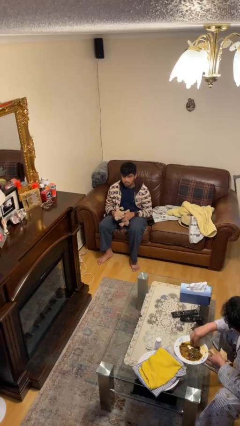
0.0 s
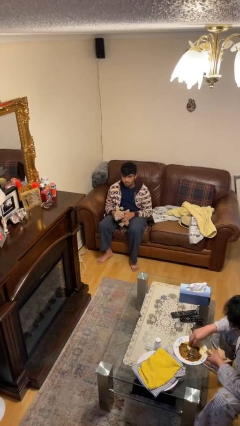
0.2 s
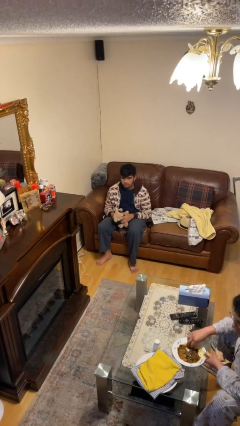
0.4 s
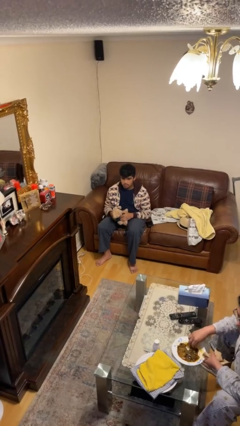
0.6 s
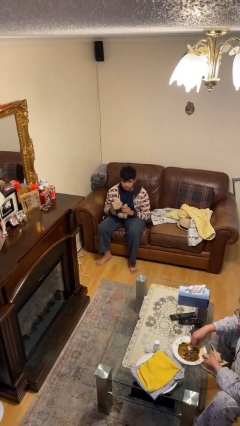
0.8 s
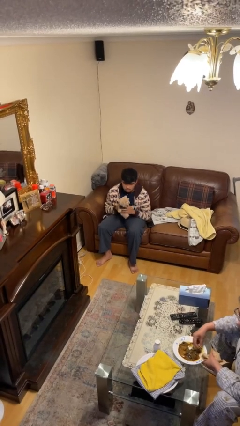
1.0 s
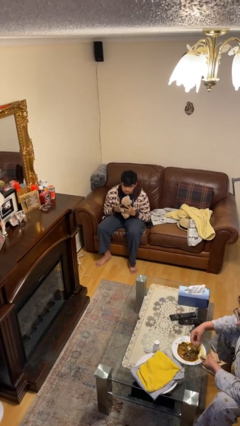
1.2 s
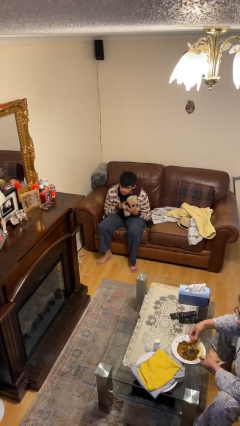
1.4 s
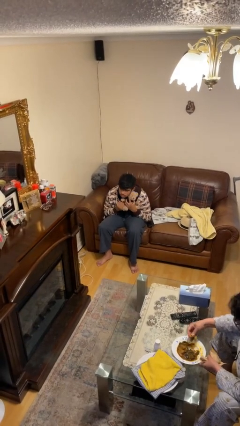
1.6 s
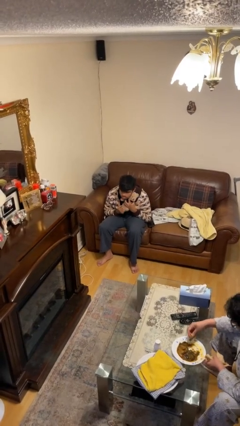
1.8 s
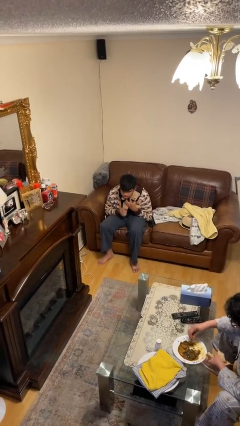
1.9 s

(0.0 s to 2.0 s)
person hugs stuffed animal

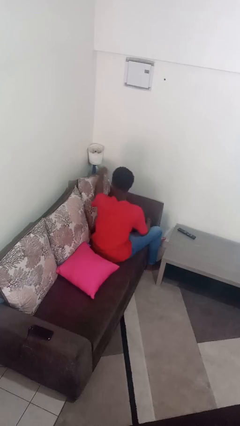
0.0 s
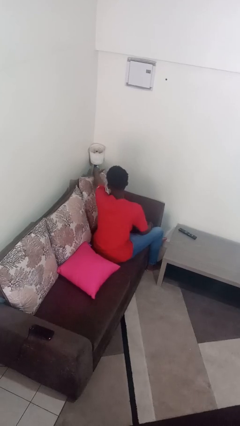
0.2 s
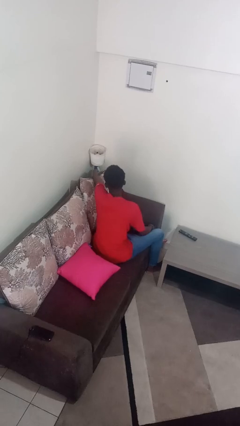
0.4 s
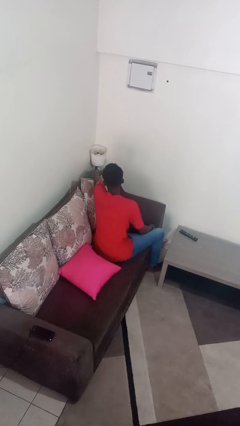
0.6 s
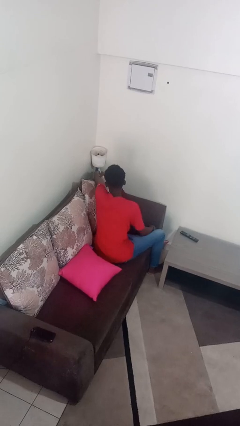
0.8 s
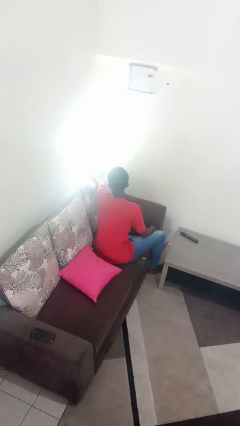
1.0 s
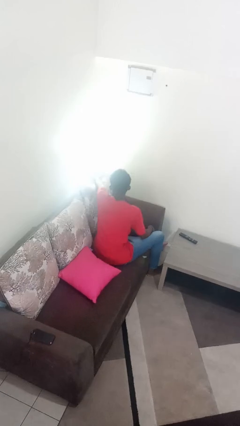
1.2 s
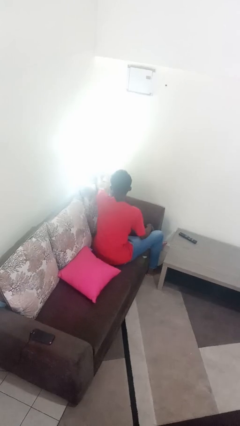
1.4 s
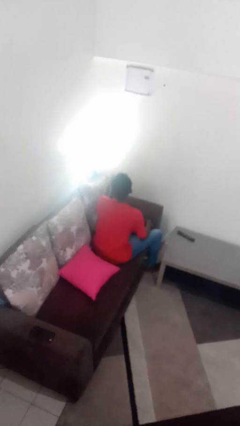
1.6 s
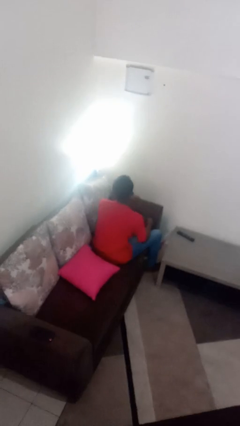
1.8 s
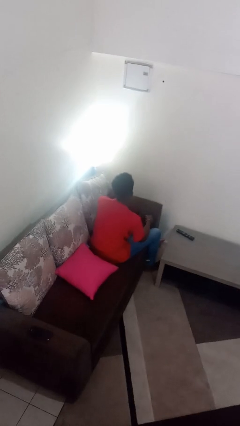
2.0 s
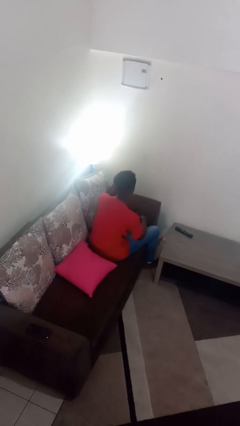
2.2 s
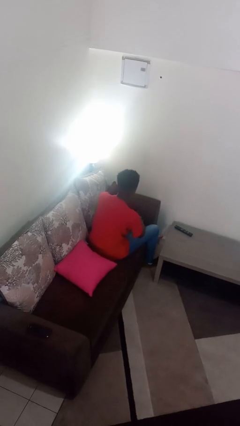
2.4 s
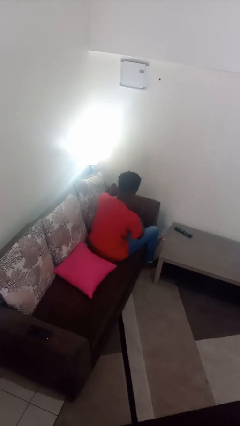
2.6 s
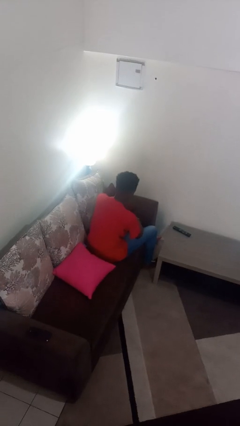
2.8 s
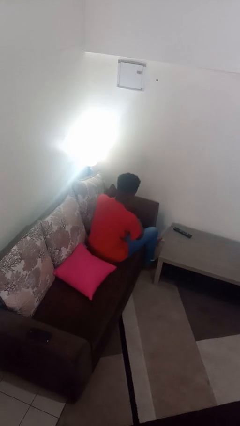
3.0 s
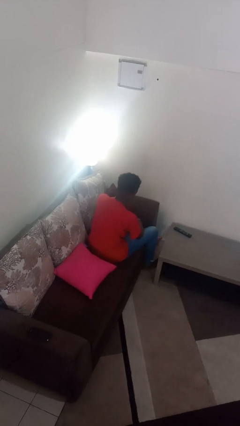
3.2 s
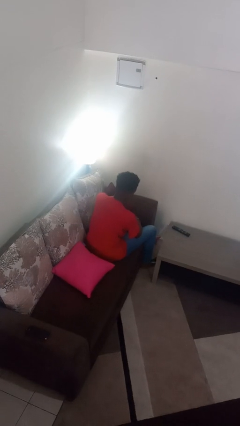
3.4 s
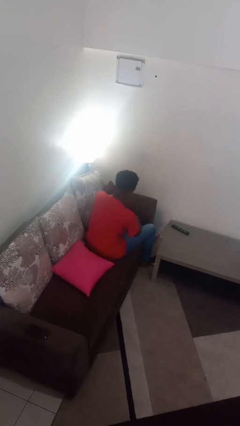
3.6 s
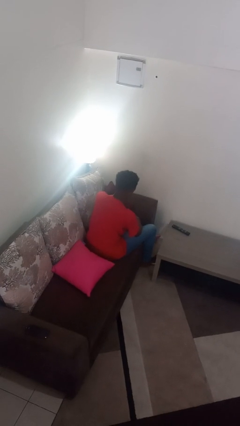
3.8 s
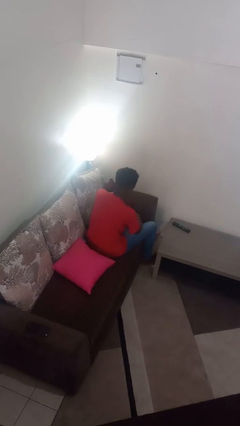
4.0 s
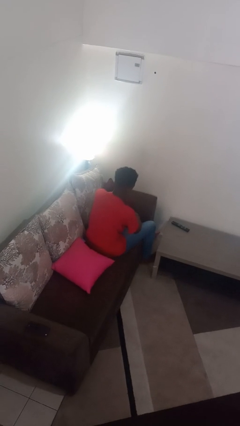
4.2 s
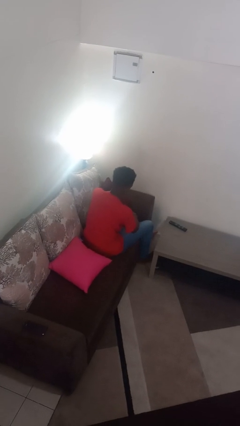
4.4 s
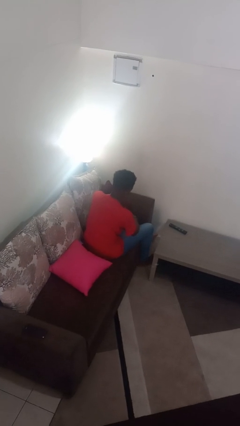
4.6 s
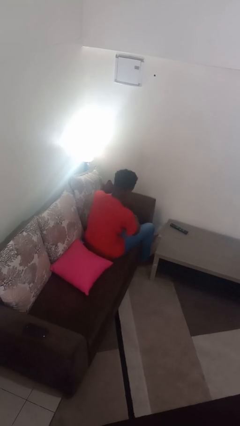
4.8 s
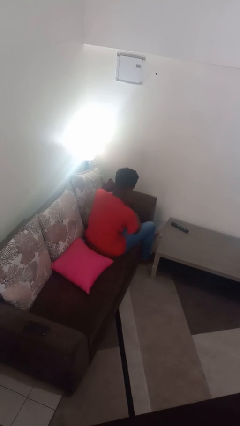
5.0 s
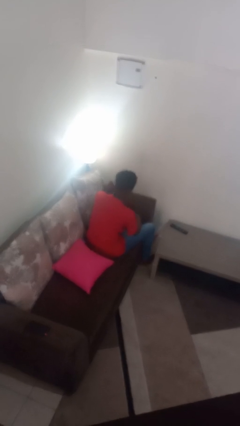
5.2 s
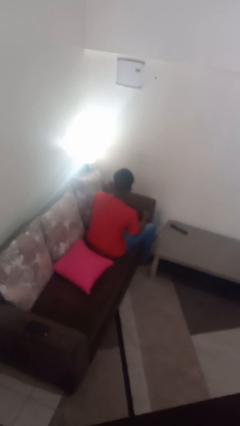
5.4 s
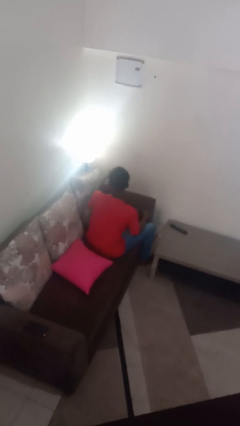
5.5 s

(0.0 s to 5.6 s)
person turns on lamp

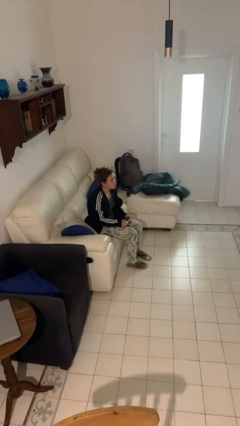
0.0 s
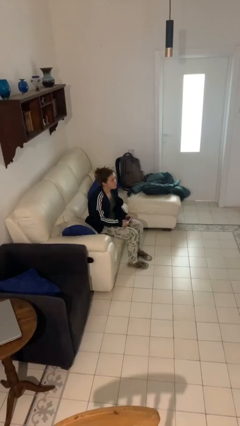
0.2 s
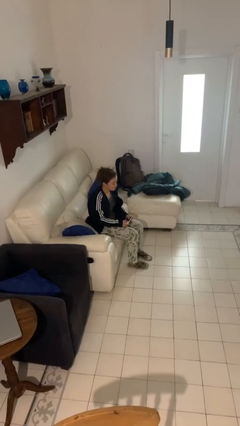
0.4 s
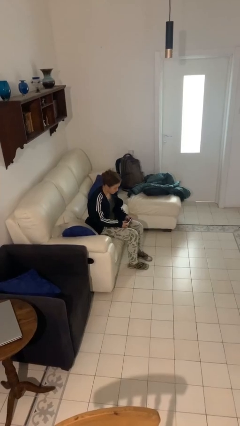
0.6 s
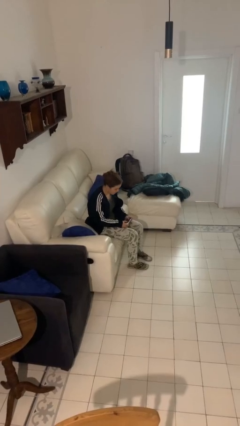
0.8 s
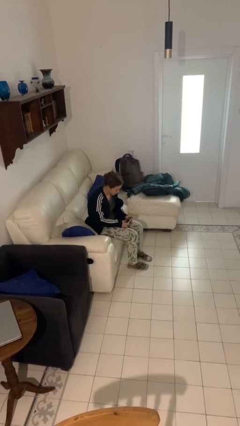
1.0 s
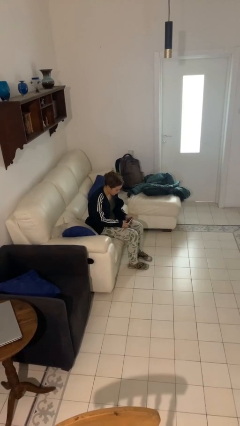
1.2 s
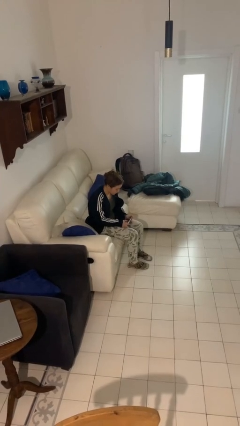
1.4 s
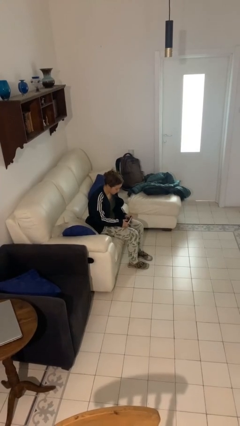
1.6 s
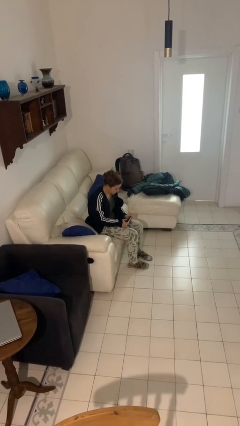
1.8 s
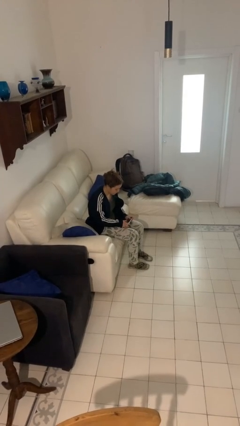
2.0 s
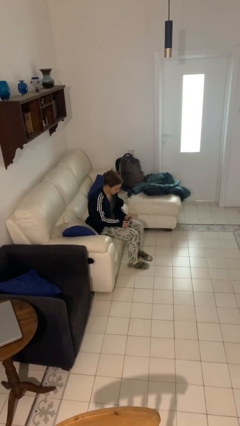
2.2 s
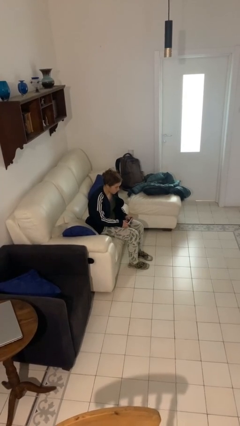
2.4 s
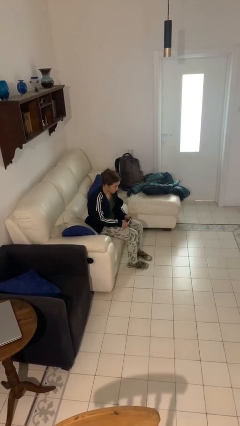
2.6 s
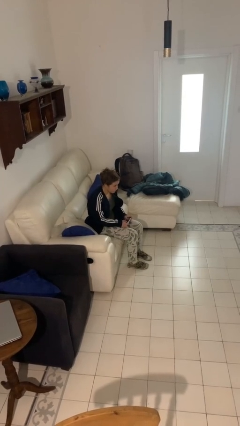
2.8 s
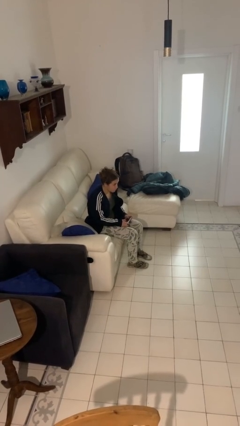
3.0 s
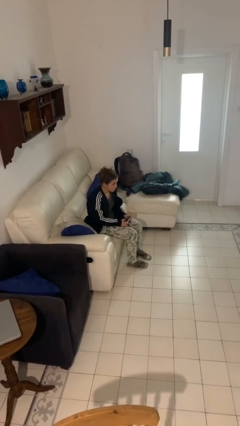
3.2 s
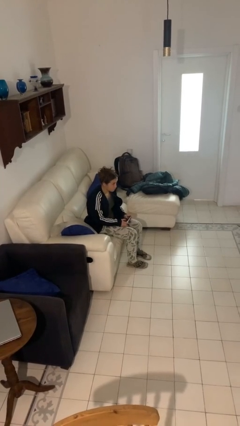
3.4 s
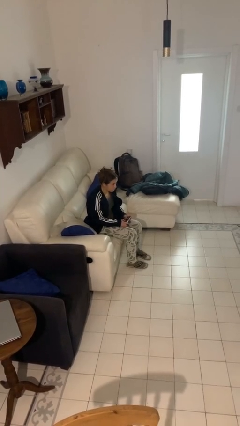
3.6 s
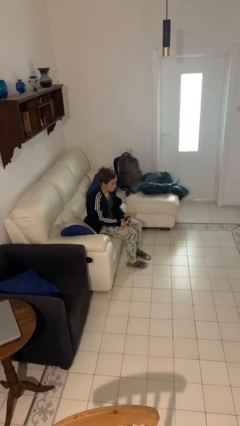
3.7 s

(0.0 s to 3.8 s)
person interacts with handheld game

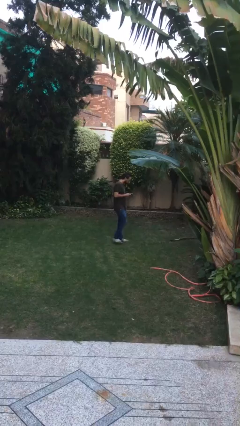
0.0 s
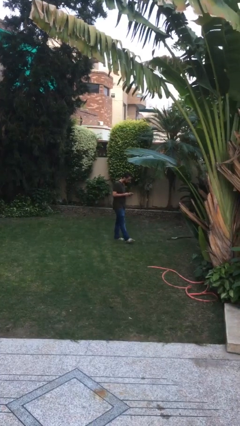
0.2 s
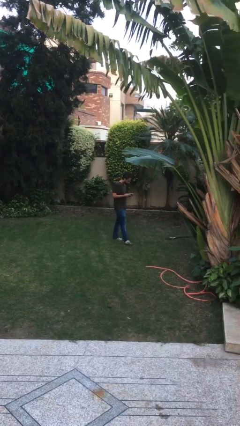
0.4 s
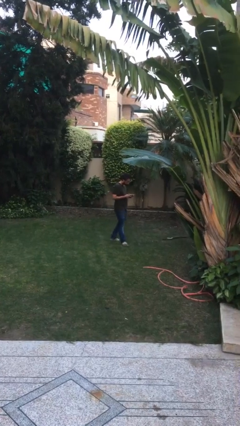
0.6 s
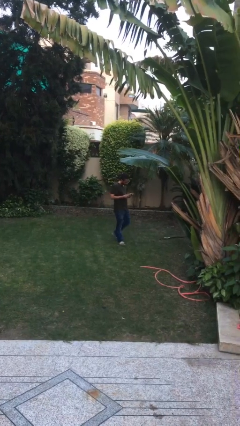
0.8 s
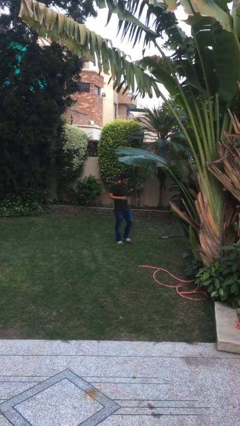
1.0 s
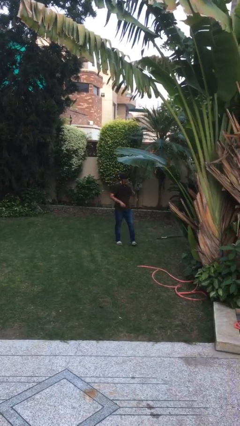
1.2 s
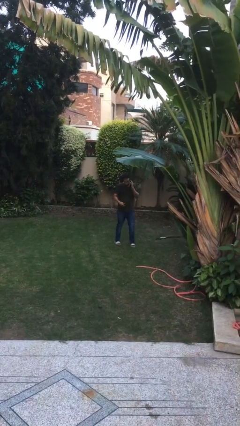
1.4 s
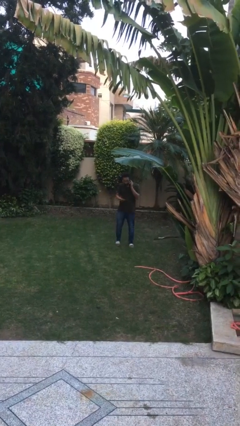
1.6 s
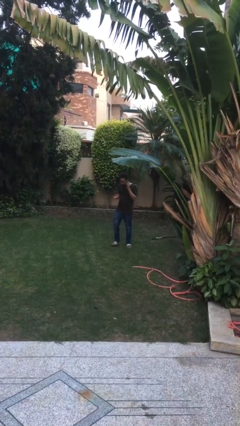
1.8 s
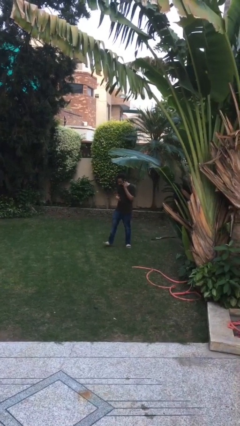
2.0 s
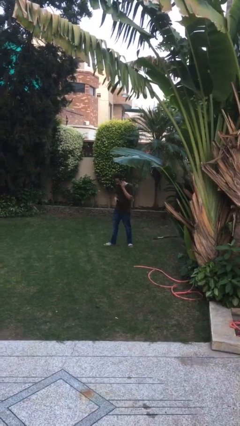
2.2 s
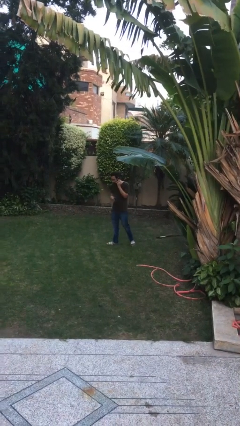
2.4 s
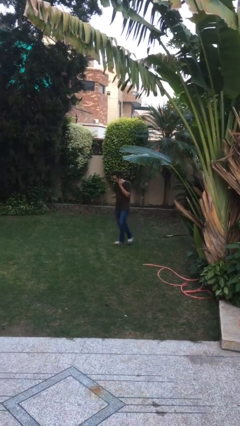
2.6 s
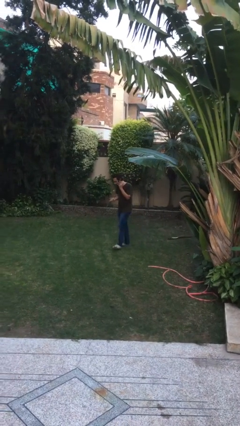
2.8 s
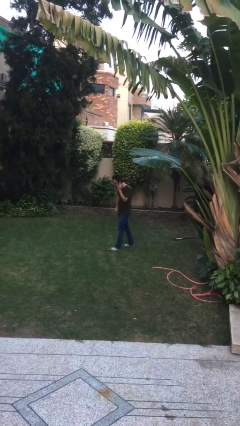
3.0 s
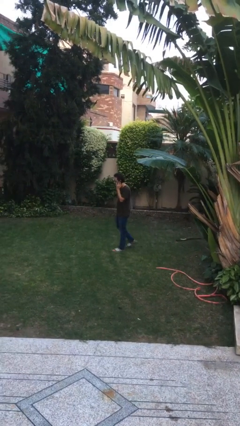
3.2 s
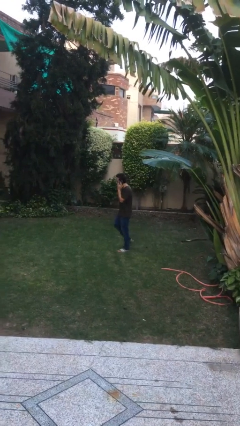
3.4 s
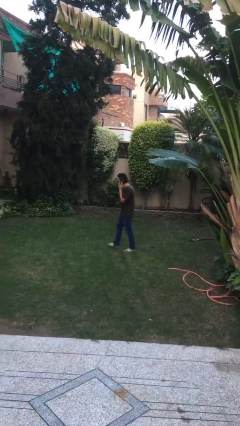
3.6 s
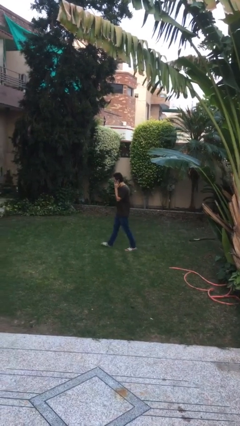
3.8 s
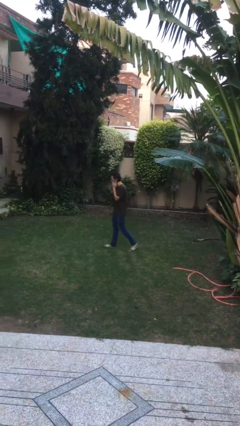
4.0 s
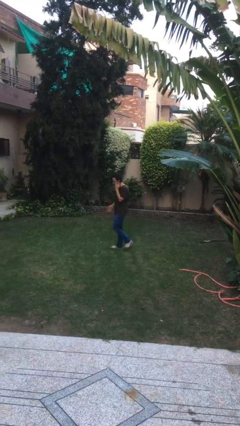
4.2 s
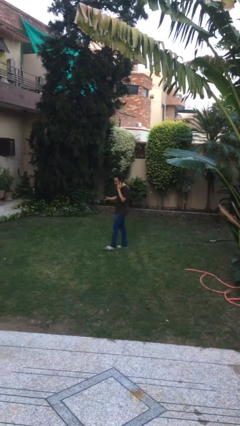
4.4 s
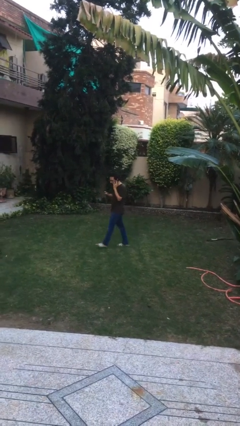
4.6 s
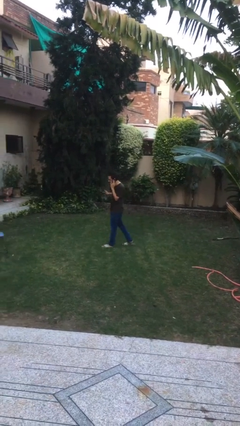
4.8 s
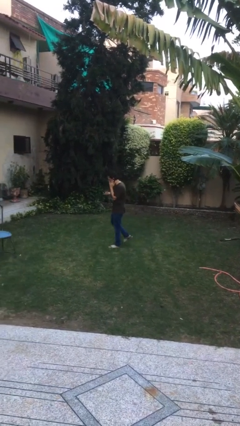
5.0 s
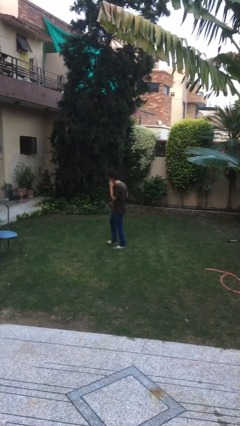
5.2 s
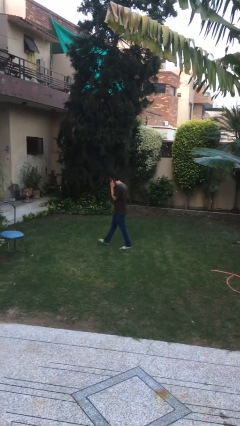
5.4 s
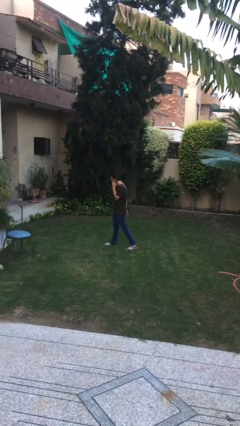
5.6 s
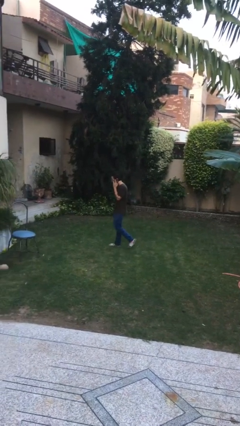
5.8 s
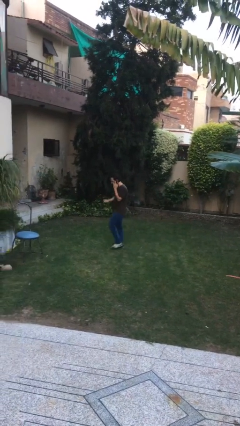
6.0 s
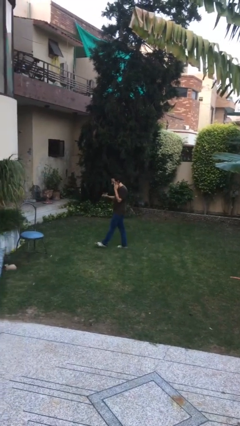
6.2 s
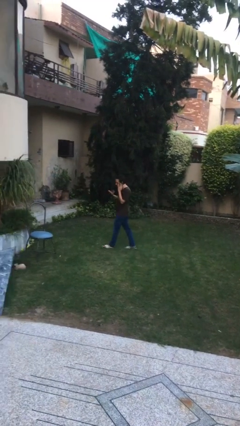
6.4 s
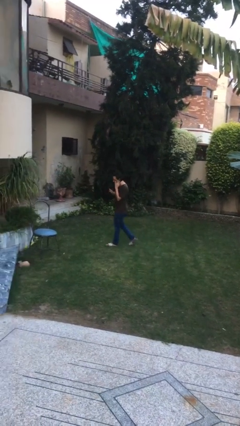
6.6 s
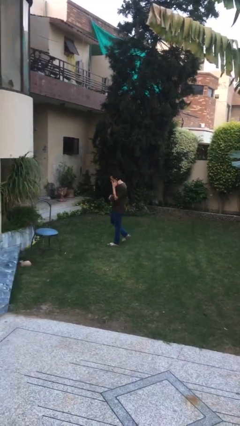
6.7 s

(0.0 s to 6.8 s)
person talks on phone
